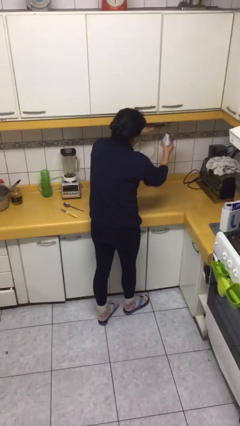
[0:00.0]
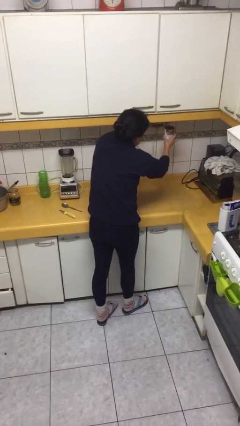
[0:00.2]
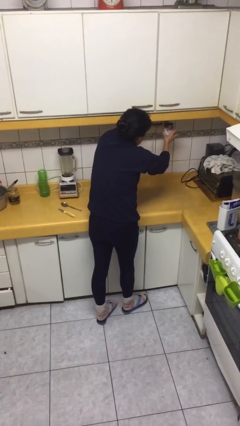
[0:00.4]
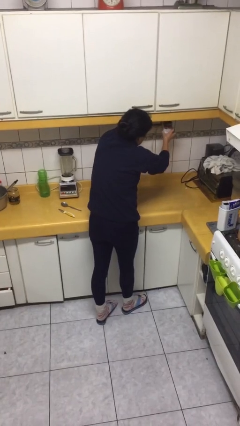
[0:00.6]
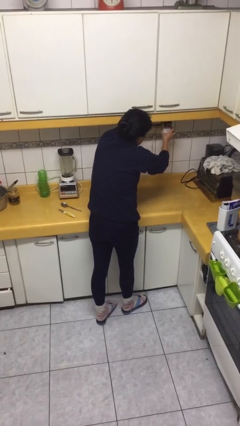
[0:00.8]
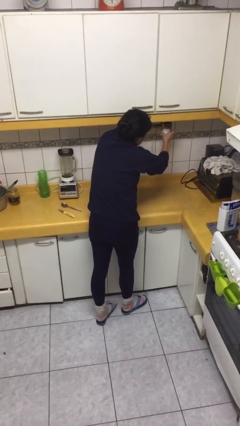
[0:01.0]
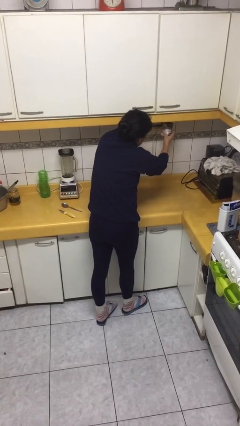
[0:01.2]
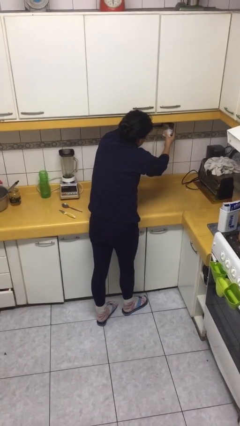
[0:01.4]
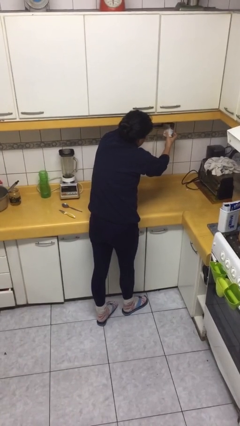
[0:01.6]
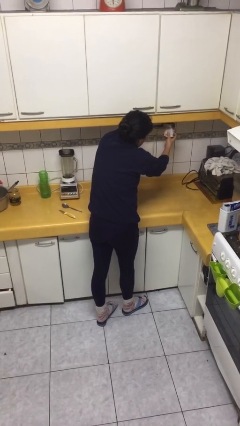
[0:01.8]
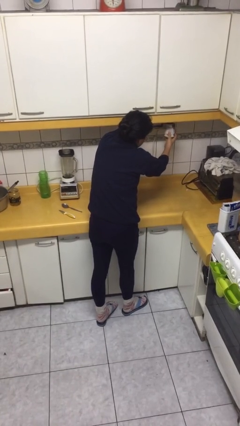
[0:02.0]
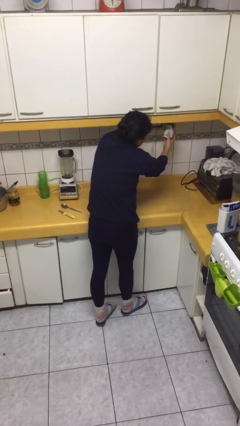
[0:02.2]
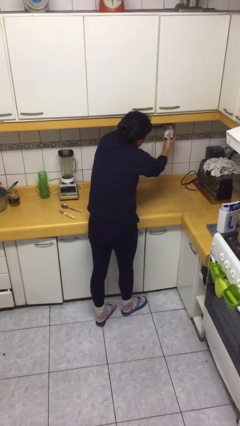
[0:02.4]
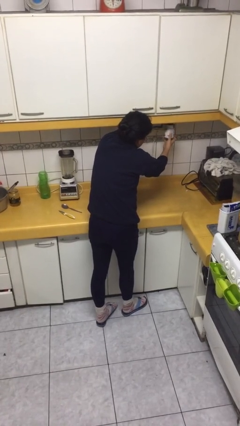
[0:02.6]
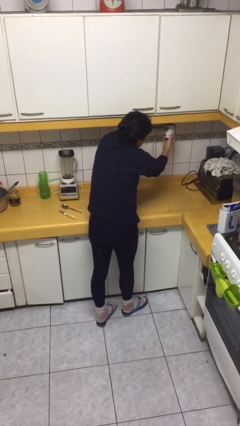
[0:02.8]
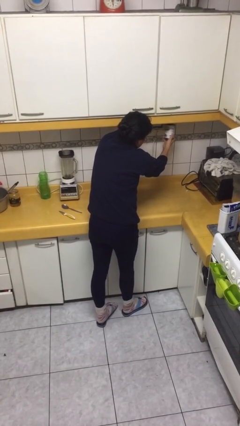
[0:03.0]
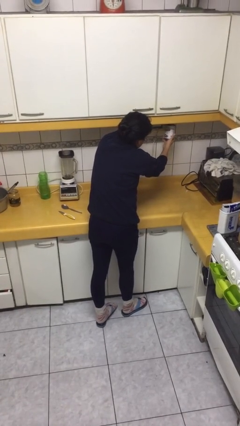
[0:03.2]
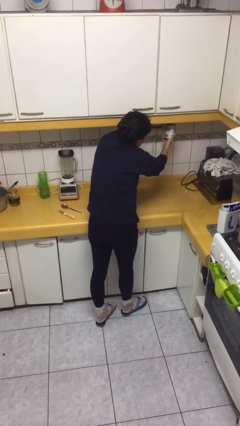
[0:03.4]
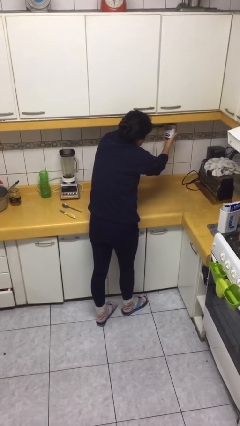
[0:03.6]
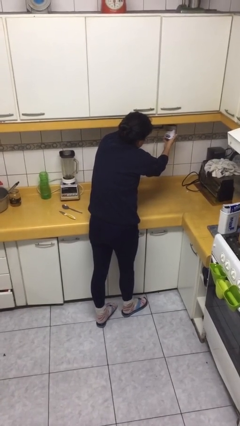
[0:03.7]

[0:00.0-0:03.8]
person opens can with can opener

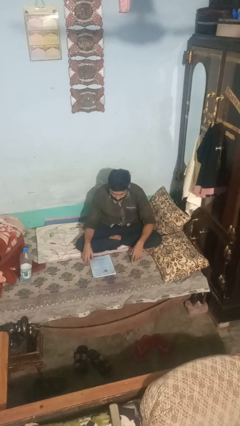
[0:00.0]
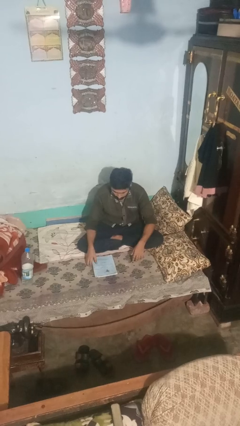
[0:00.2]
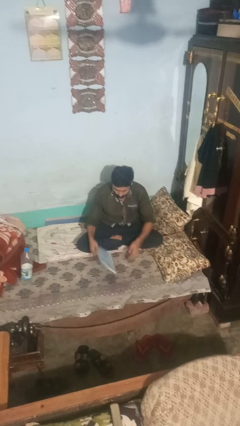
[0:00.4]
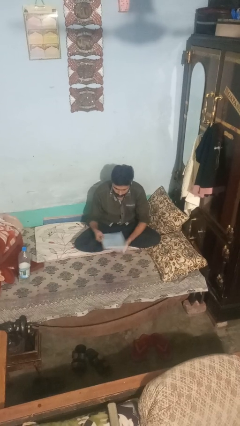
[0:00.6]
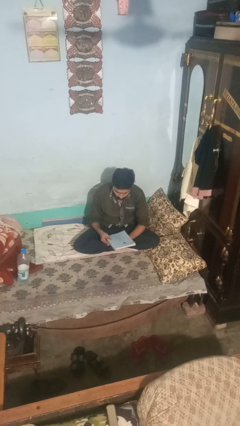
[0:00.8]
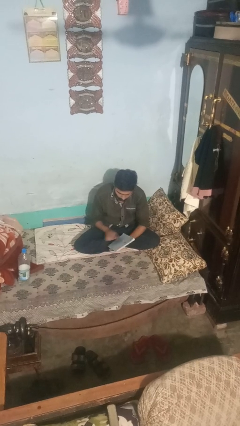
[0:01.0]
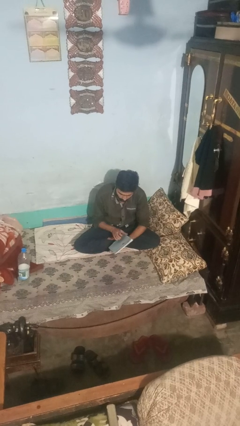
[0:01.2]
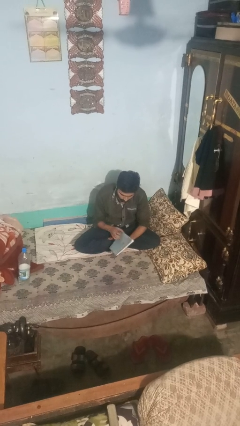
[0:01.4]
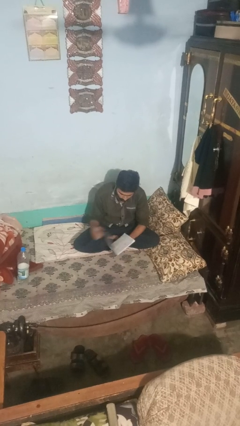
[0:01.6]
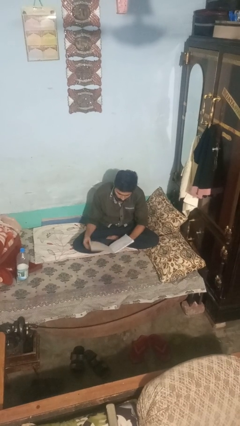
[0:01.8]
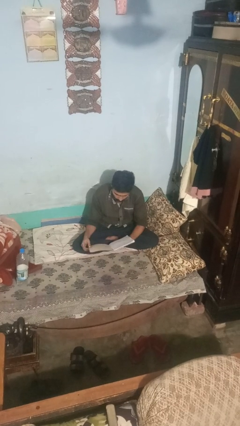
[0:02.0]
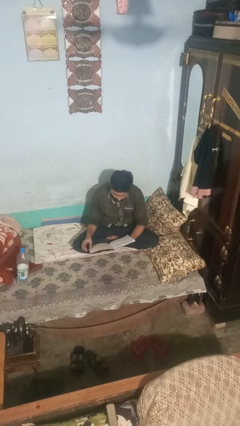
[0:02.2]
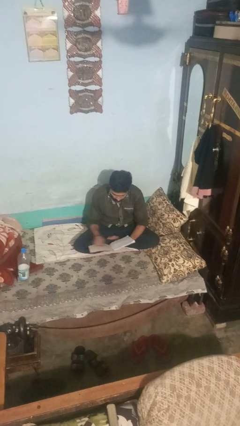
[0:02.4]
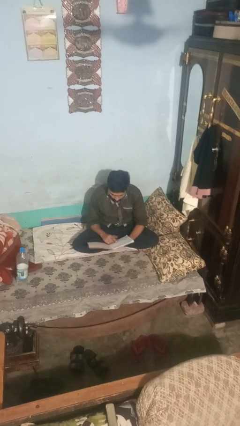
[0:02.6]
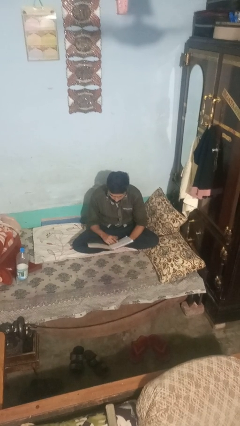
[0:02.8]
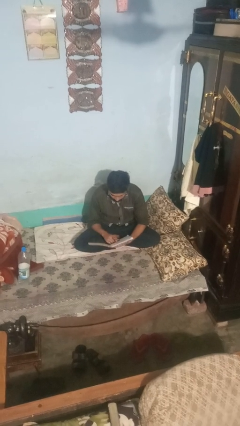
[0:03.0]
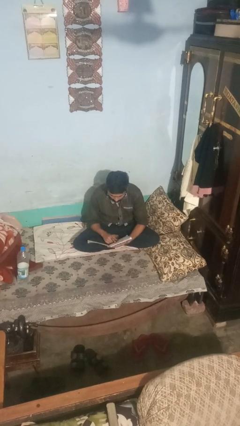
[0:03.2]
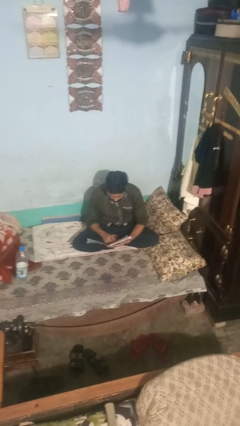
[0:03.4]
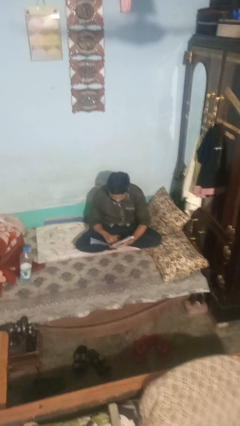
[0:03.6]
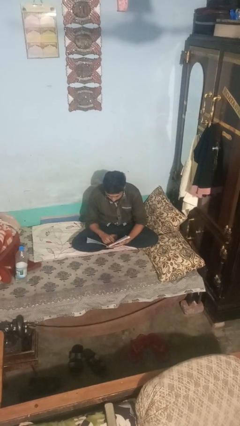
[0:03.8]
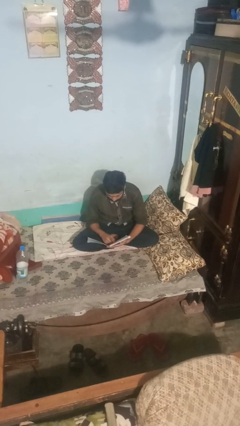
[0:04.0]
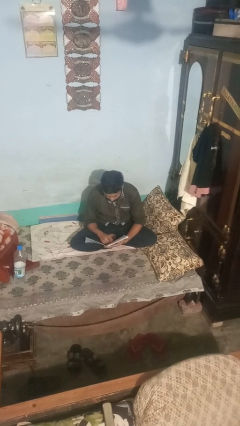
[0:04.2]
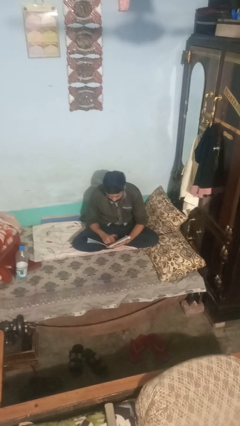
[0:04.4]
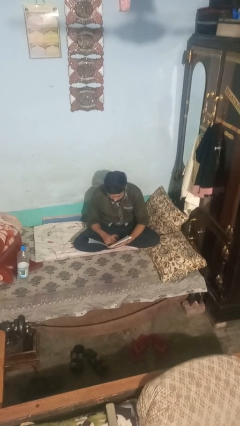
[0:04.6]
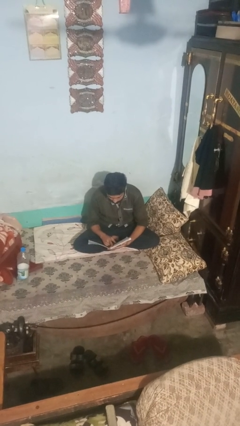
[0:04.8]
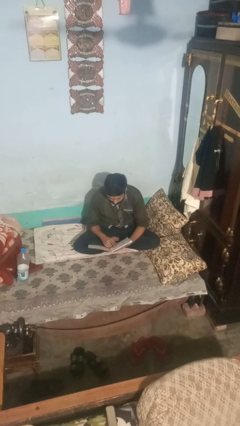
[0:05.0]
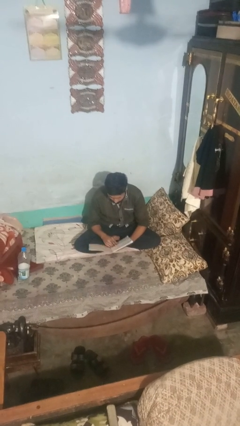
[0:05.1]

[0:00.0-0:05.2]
person reads book

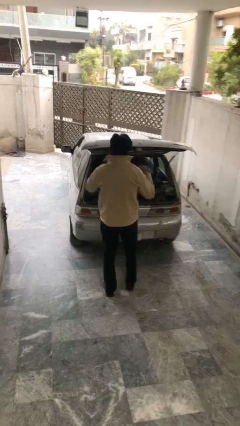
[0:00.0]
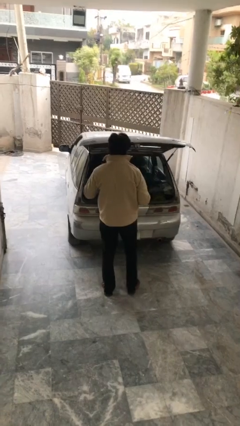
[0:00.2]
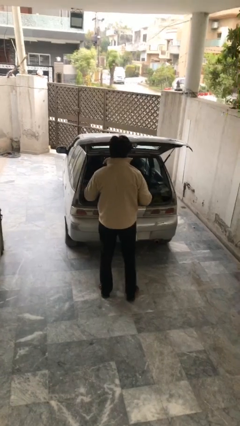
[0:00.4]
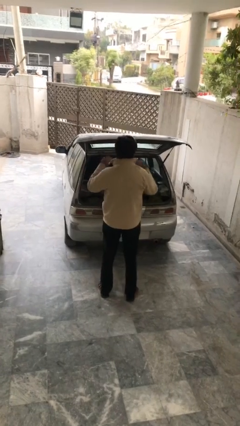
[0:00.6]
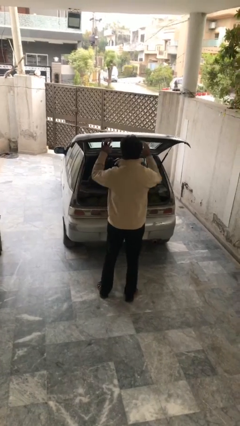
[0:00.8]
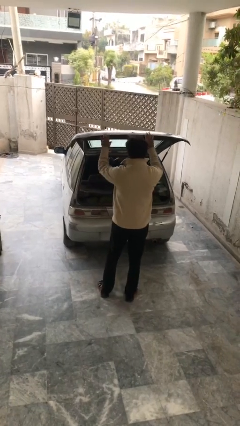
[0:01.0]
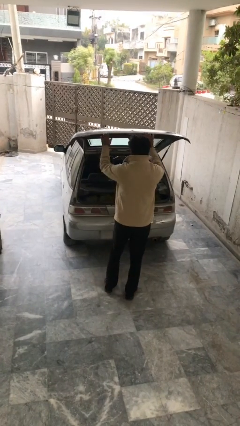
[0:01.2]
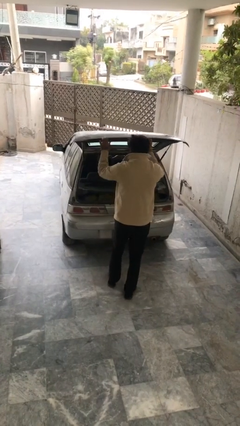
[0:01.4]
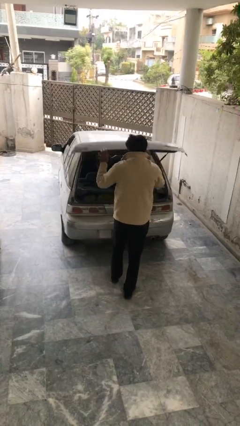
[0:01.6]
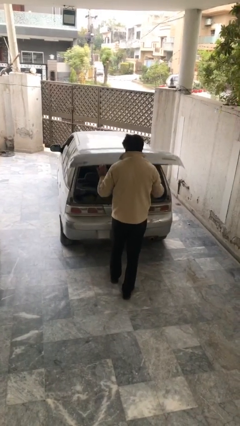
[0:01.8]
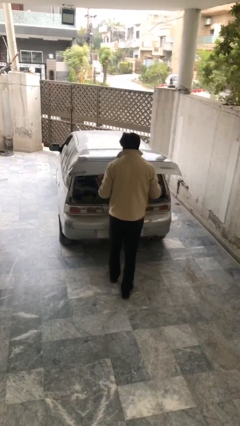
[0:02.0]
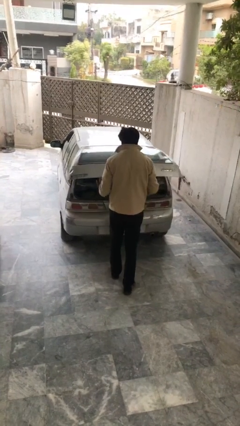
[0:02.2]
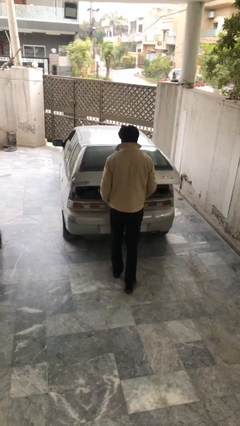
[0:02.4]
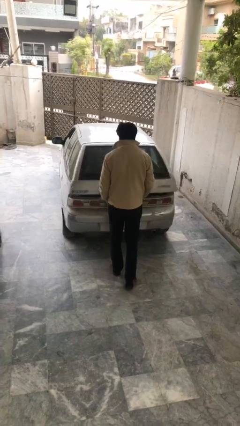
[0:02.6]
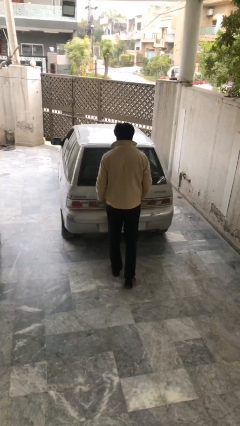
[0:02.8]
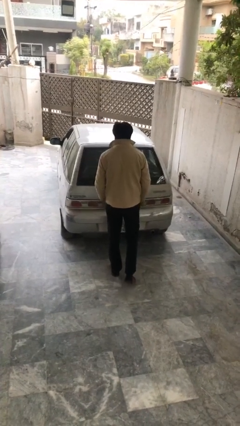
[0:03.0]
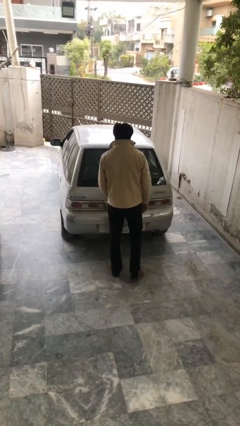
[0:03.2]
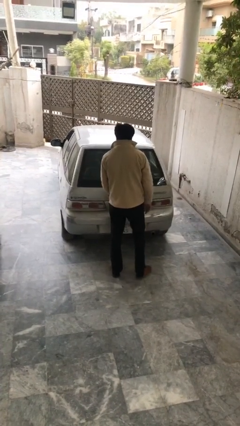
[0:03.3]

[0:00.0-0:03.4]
person closes car trunk

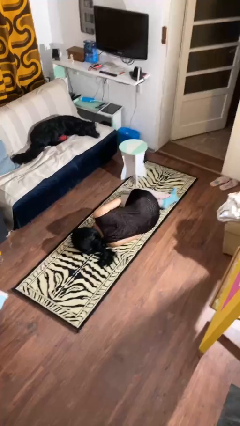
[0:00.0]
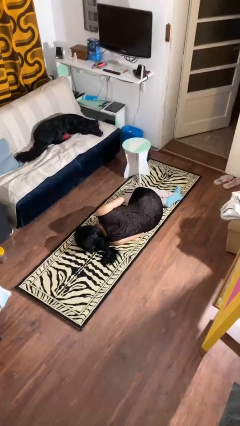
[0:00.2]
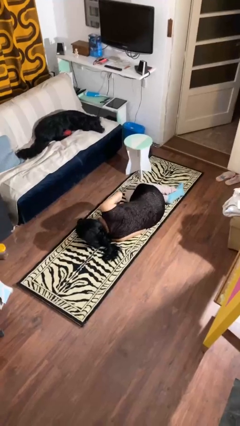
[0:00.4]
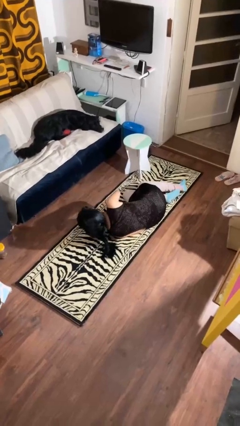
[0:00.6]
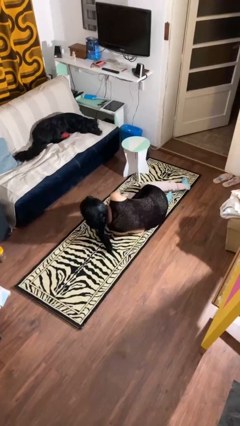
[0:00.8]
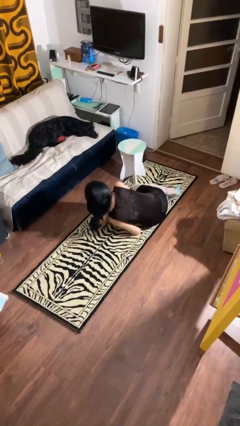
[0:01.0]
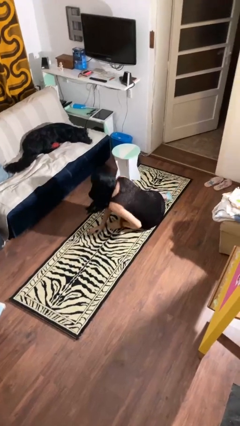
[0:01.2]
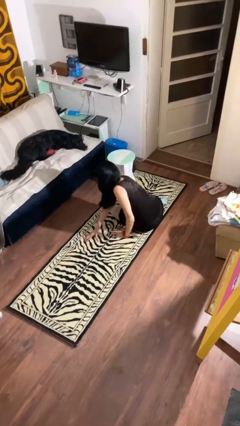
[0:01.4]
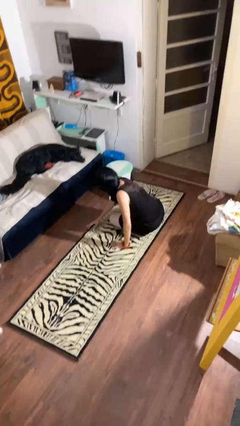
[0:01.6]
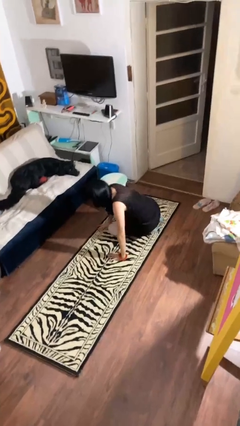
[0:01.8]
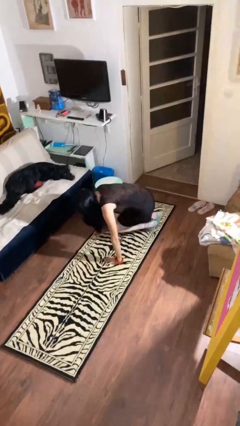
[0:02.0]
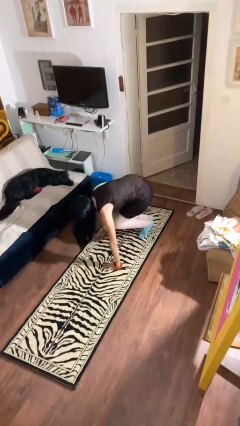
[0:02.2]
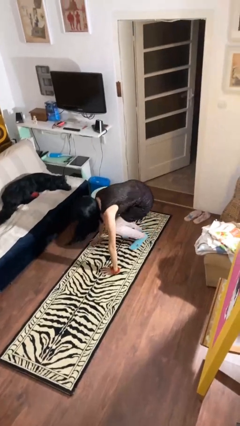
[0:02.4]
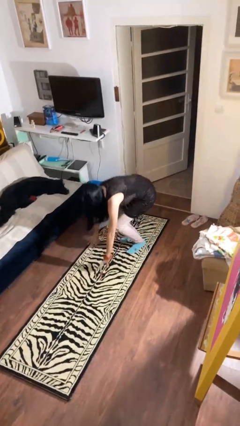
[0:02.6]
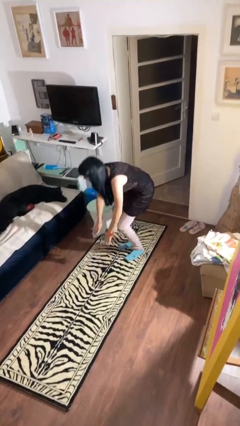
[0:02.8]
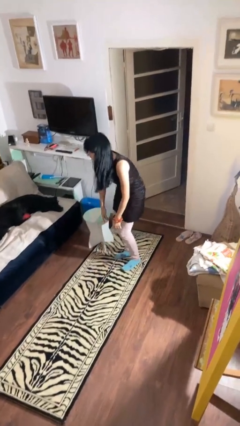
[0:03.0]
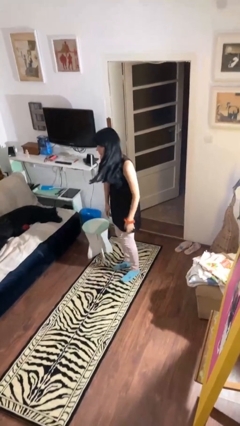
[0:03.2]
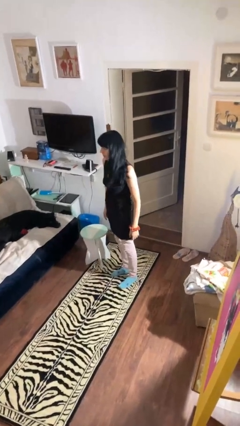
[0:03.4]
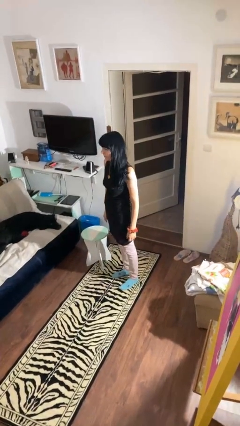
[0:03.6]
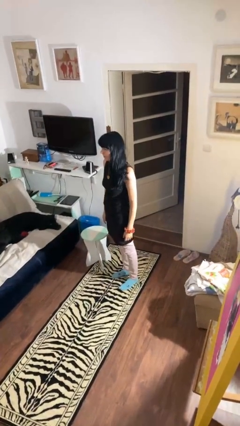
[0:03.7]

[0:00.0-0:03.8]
person stands up from floor

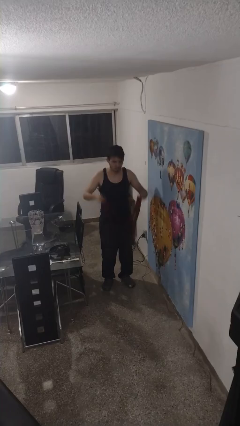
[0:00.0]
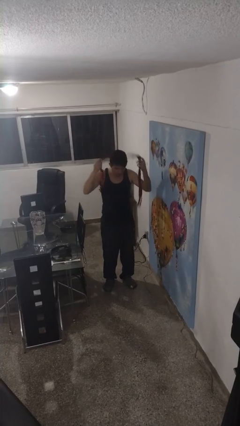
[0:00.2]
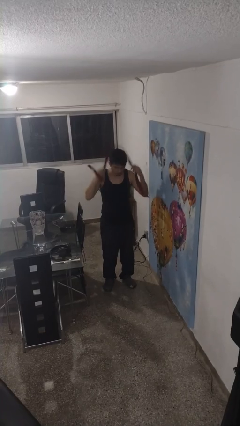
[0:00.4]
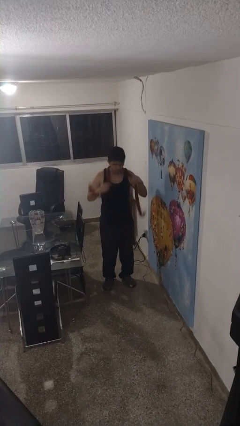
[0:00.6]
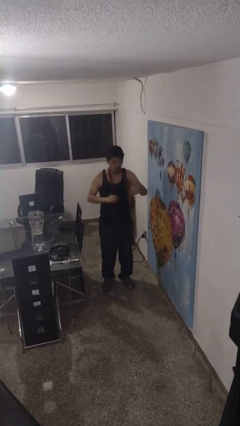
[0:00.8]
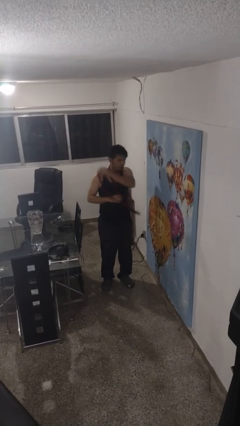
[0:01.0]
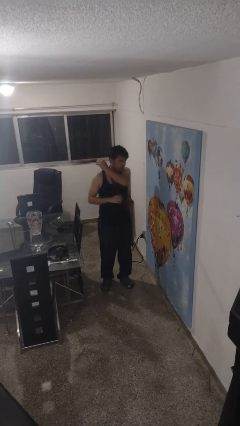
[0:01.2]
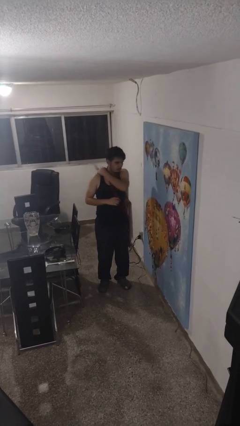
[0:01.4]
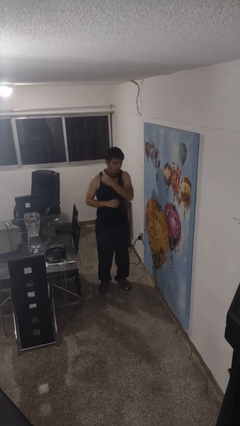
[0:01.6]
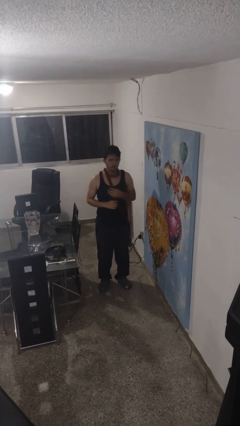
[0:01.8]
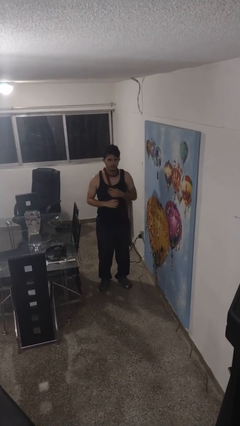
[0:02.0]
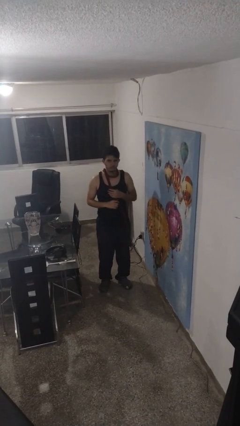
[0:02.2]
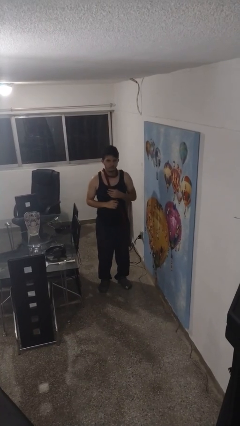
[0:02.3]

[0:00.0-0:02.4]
person puts on scarf
